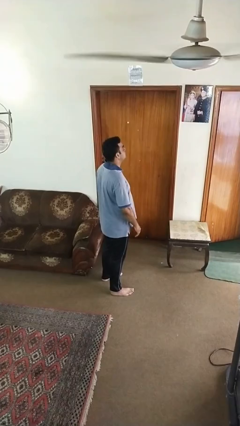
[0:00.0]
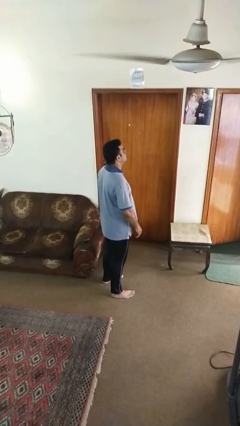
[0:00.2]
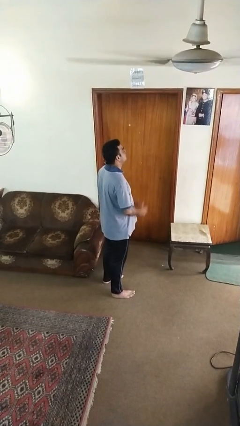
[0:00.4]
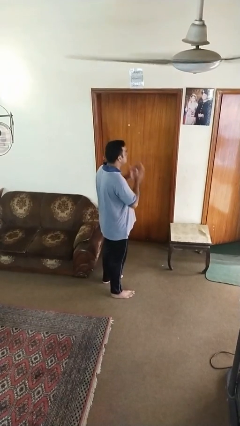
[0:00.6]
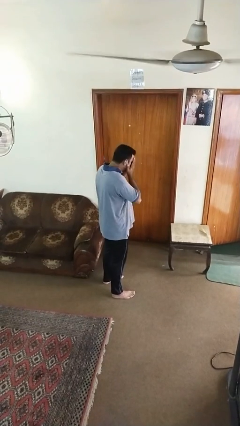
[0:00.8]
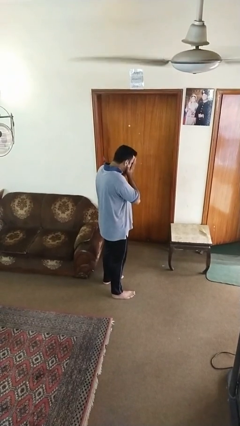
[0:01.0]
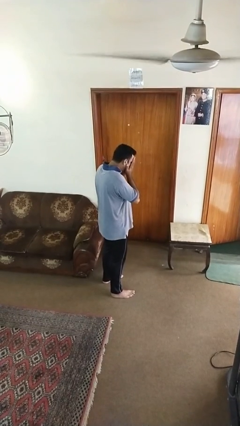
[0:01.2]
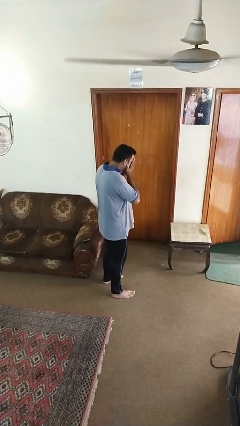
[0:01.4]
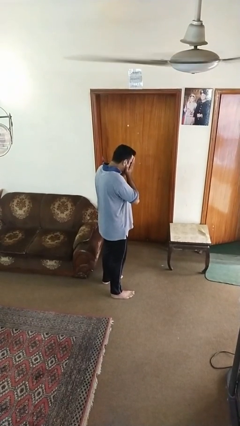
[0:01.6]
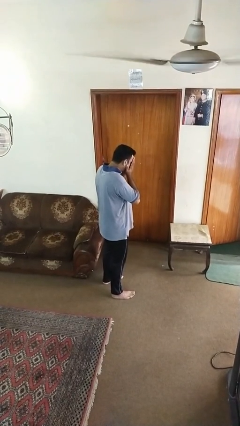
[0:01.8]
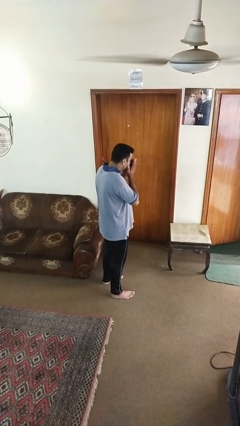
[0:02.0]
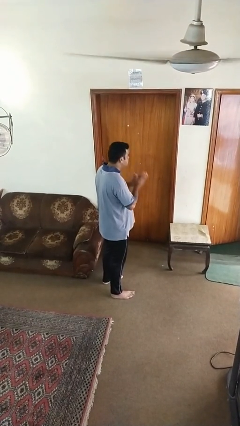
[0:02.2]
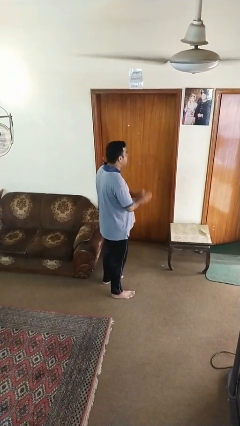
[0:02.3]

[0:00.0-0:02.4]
person sneezes into hand

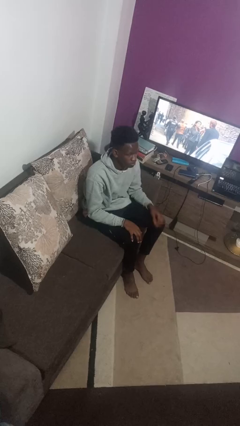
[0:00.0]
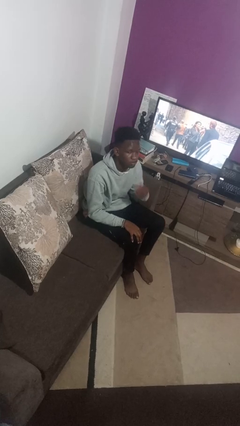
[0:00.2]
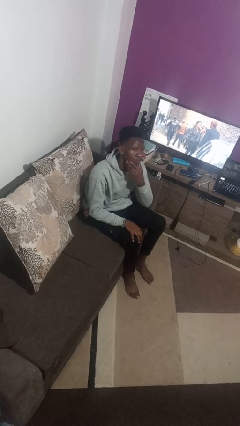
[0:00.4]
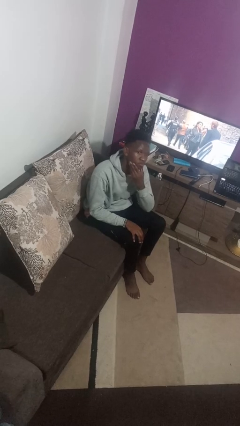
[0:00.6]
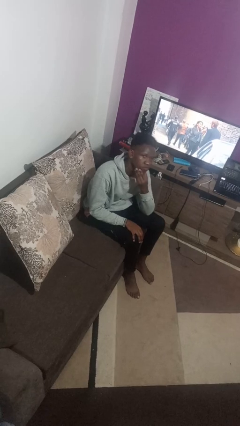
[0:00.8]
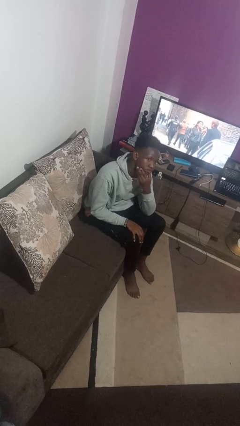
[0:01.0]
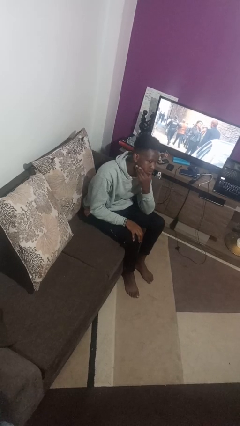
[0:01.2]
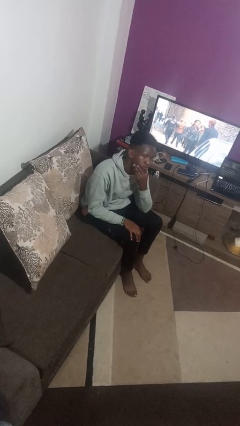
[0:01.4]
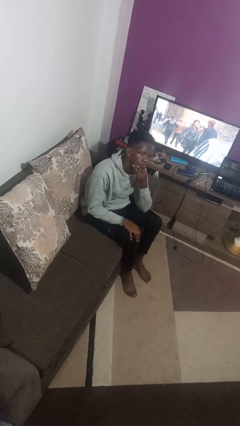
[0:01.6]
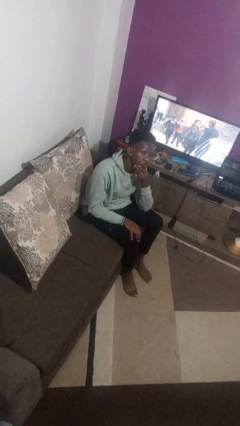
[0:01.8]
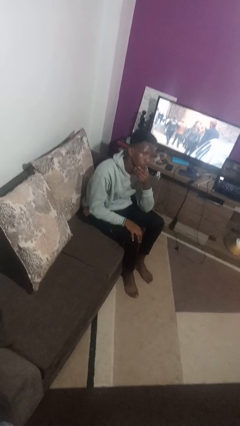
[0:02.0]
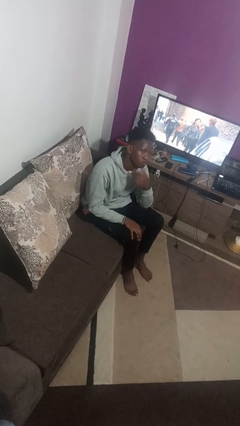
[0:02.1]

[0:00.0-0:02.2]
person strokes chin

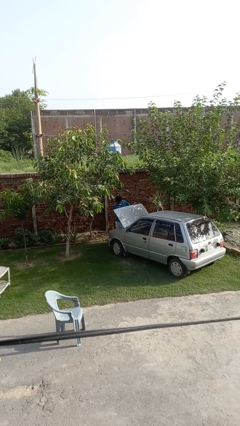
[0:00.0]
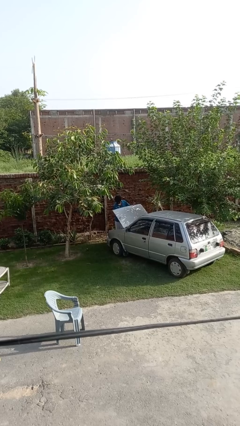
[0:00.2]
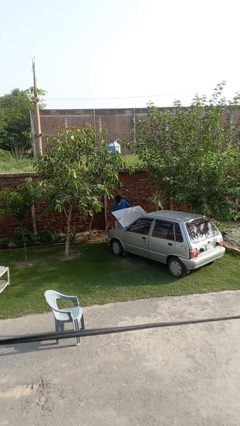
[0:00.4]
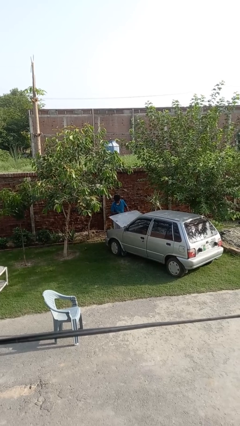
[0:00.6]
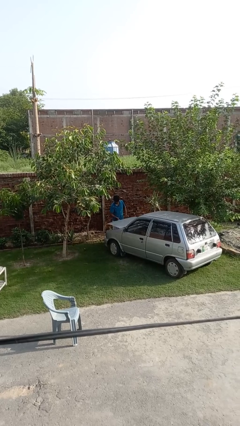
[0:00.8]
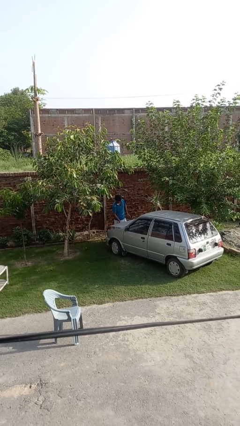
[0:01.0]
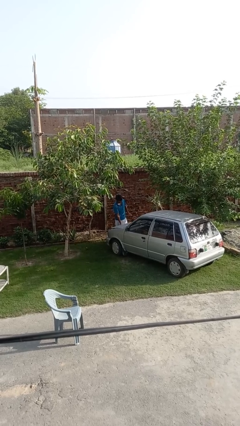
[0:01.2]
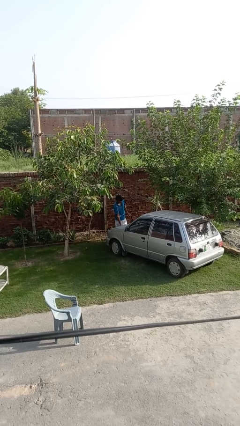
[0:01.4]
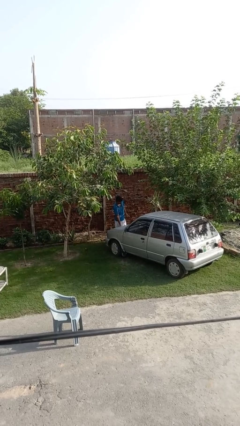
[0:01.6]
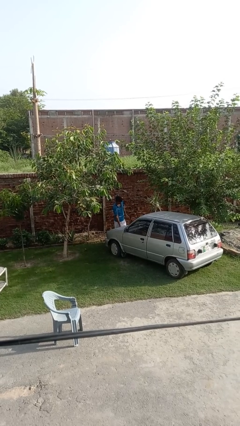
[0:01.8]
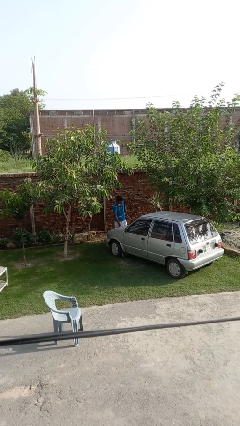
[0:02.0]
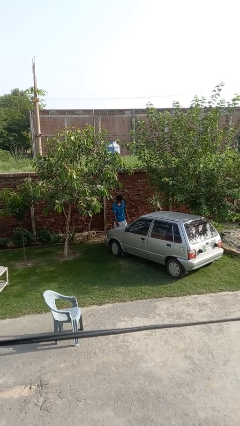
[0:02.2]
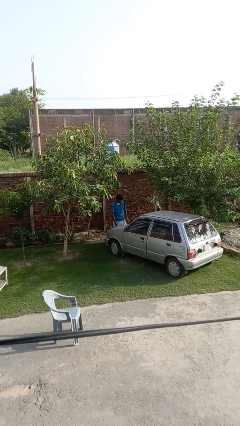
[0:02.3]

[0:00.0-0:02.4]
person closes car hood

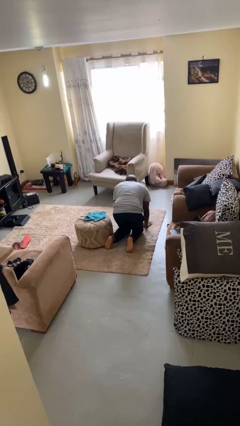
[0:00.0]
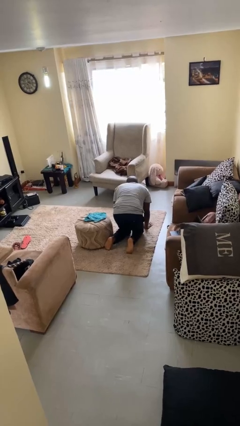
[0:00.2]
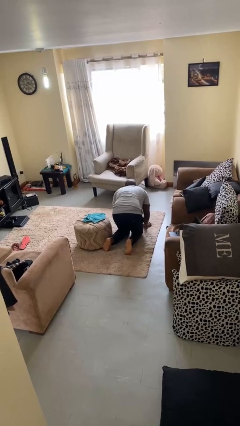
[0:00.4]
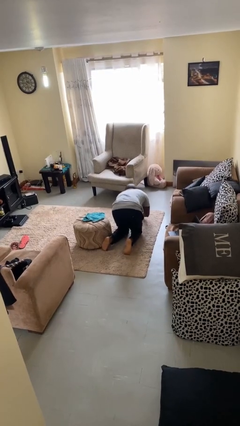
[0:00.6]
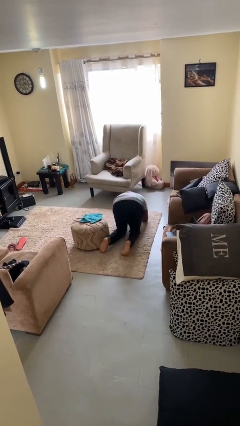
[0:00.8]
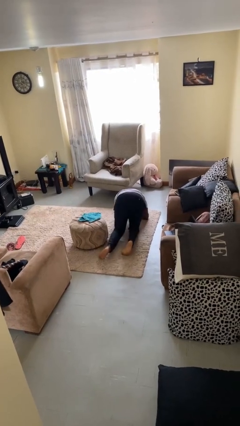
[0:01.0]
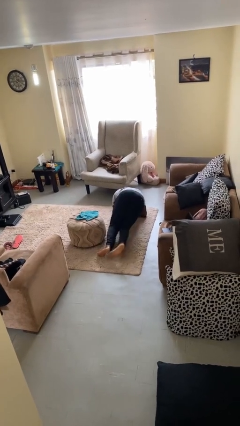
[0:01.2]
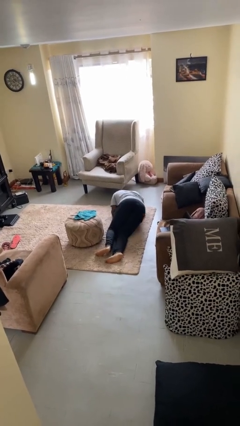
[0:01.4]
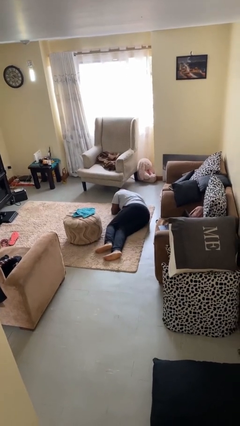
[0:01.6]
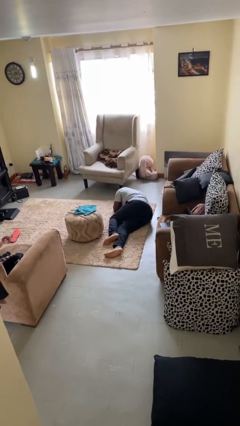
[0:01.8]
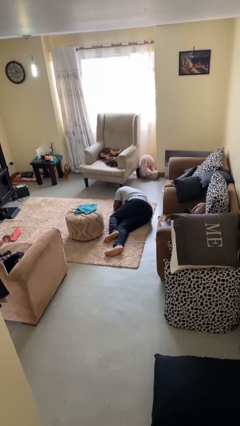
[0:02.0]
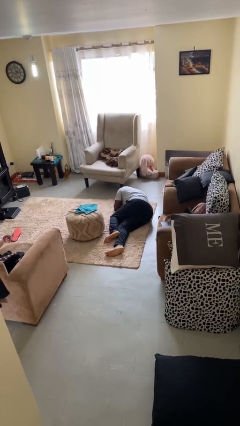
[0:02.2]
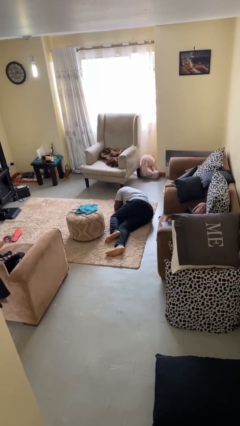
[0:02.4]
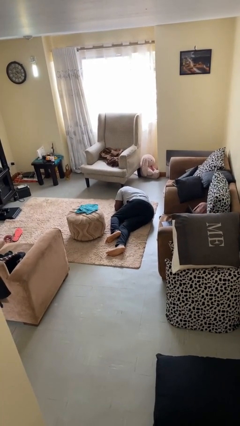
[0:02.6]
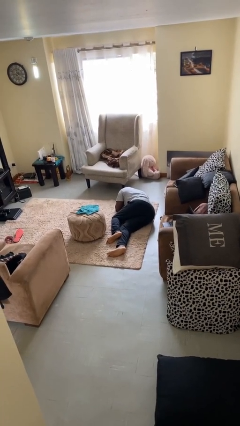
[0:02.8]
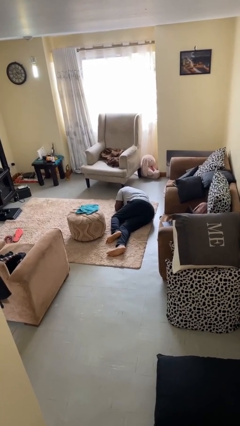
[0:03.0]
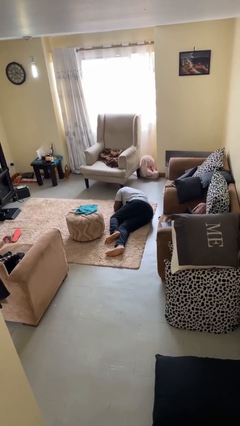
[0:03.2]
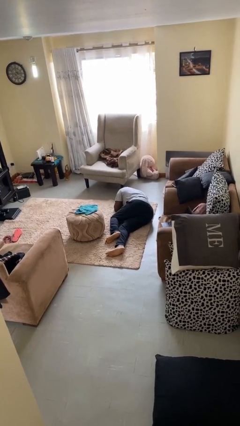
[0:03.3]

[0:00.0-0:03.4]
person lies down on floor

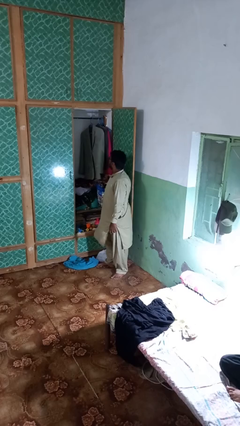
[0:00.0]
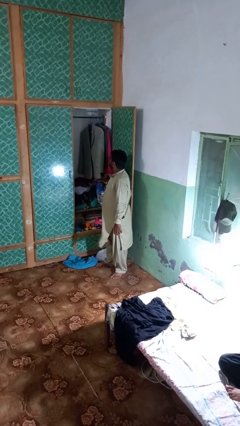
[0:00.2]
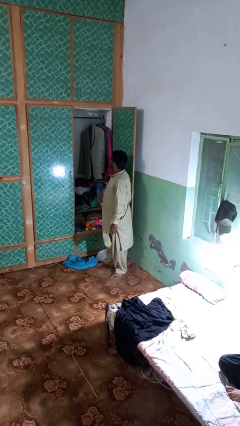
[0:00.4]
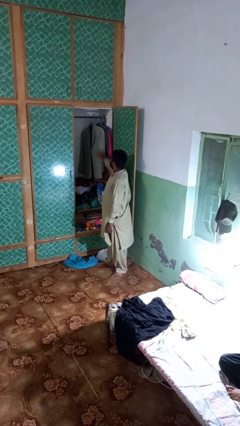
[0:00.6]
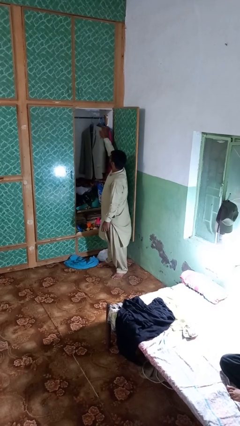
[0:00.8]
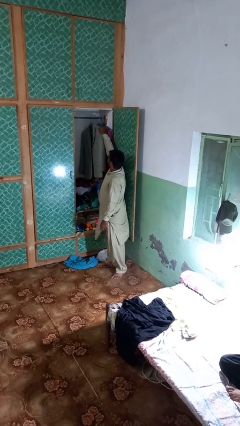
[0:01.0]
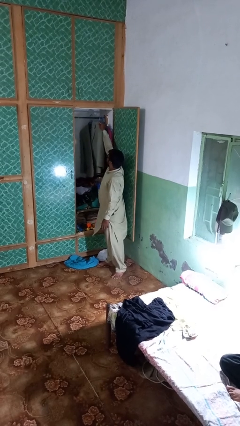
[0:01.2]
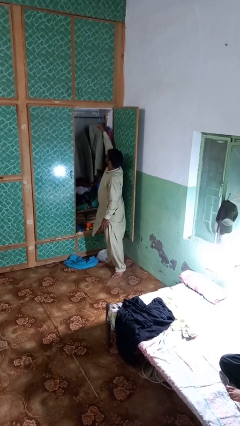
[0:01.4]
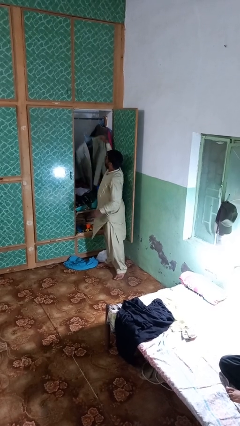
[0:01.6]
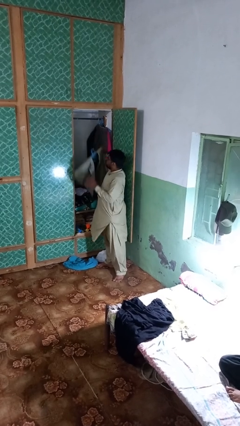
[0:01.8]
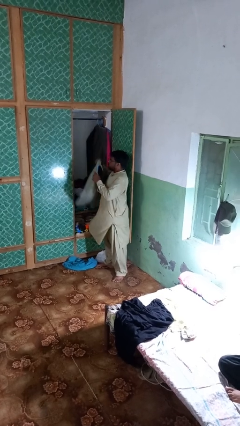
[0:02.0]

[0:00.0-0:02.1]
person takes clothes from closet

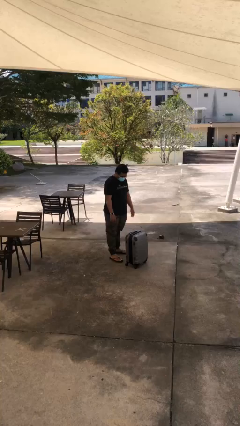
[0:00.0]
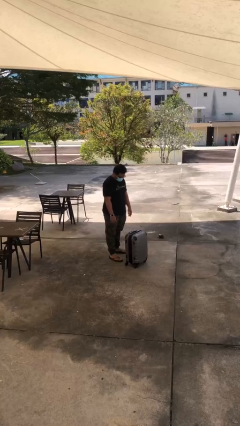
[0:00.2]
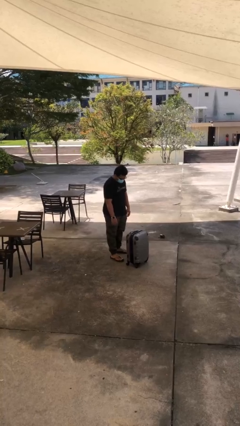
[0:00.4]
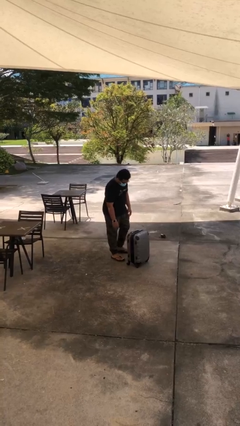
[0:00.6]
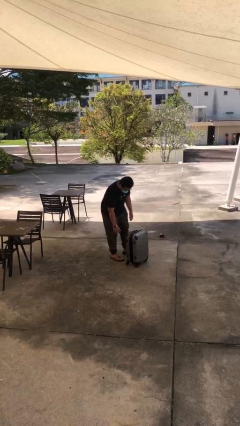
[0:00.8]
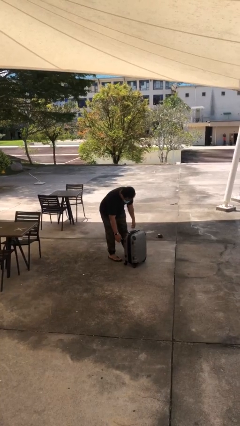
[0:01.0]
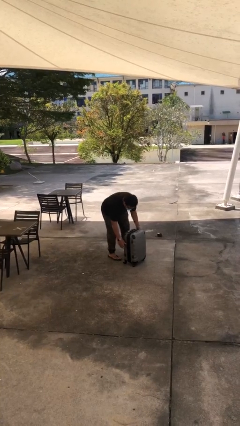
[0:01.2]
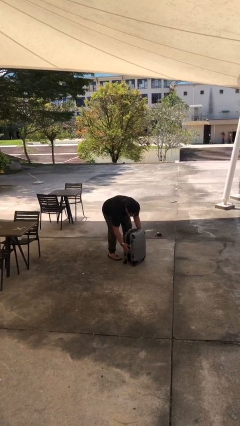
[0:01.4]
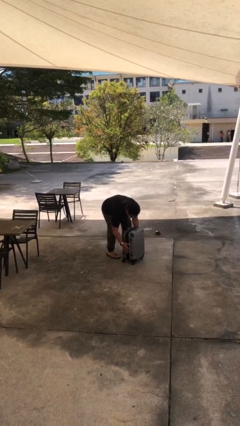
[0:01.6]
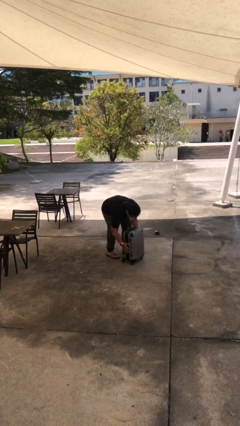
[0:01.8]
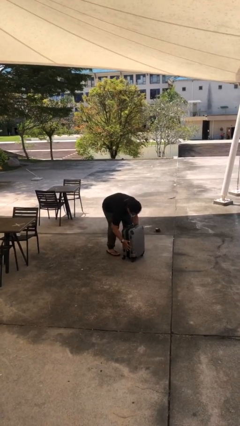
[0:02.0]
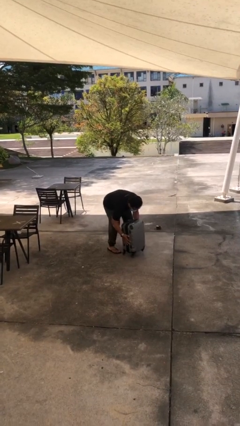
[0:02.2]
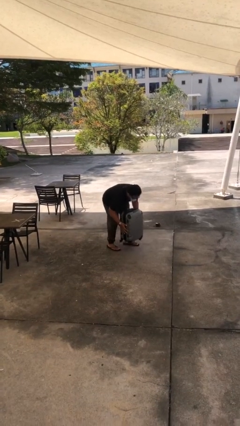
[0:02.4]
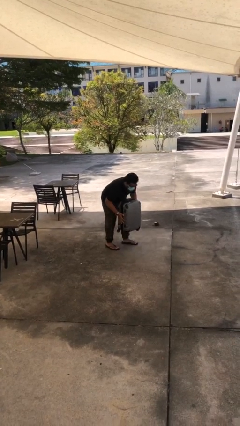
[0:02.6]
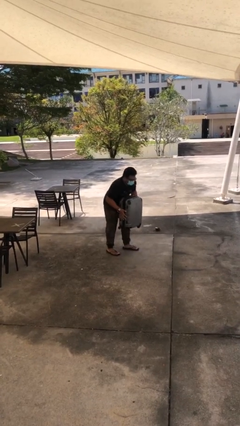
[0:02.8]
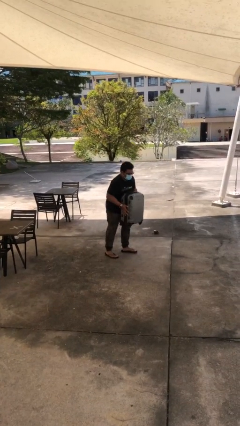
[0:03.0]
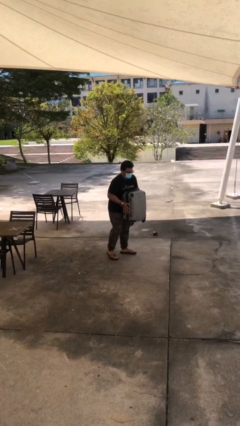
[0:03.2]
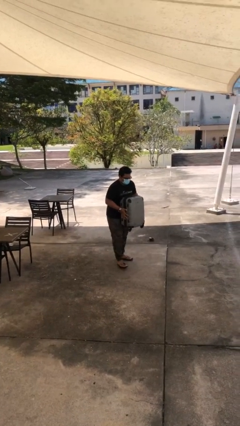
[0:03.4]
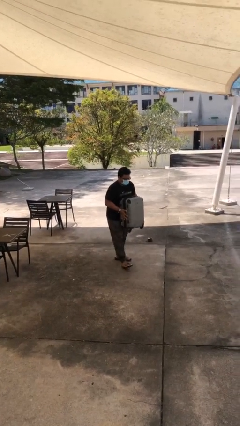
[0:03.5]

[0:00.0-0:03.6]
person picks up object from floor

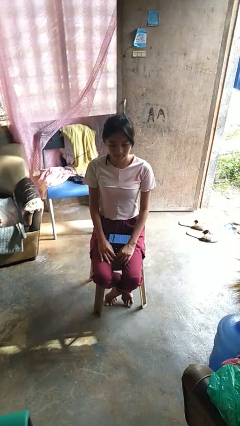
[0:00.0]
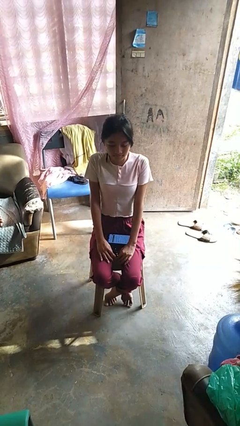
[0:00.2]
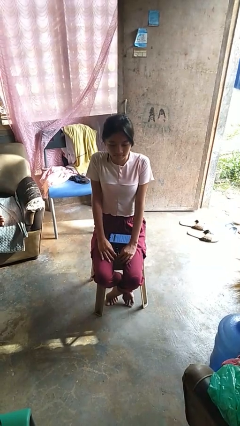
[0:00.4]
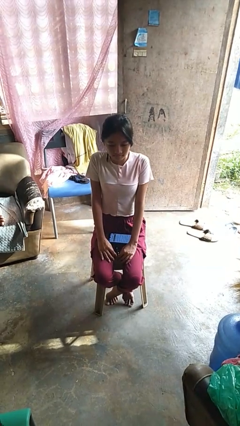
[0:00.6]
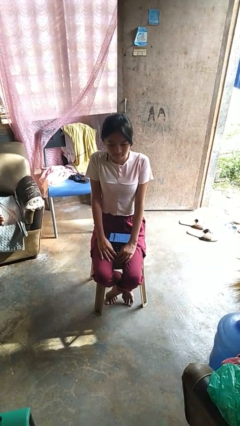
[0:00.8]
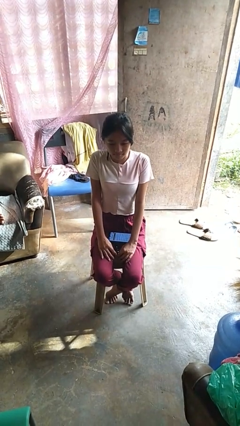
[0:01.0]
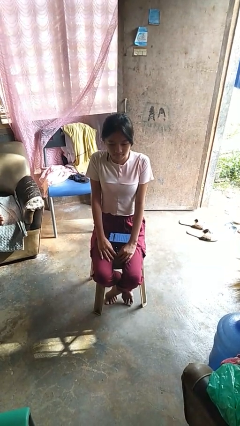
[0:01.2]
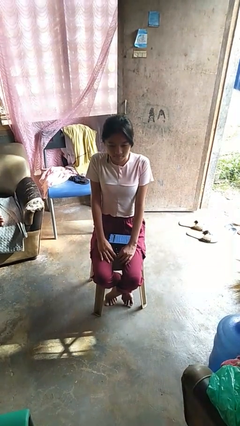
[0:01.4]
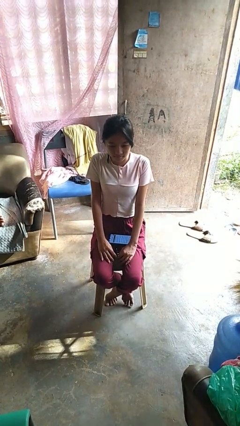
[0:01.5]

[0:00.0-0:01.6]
person shrugs
